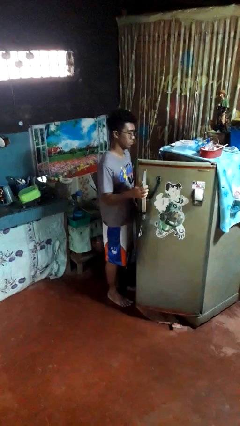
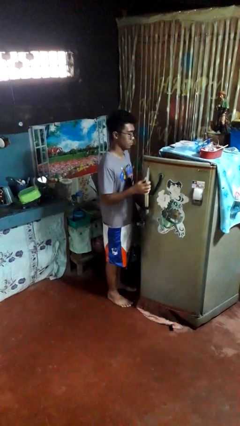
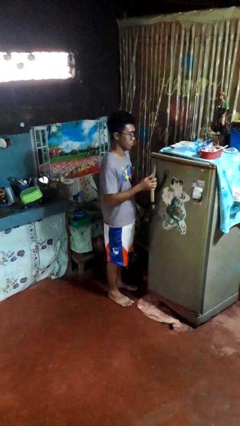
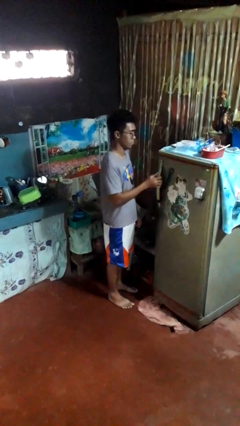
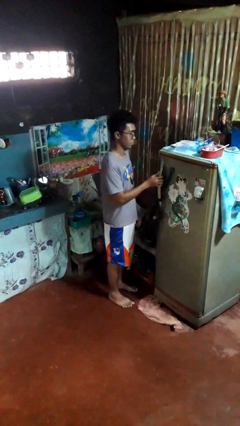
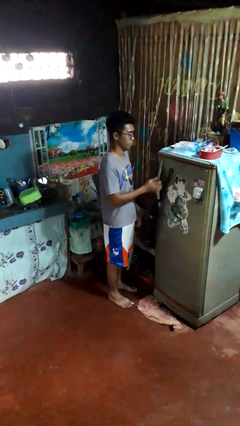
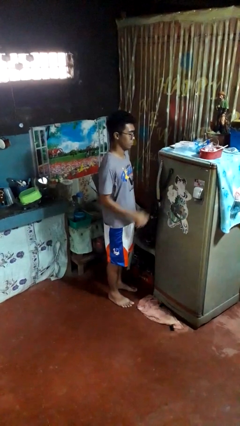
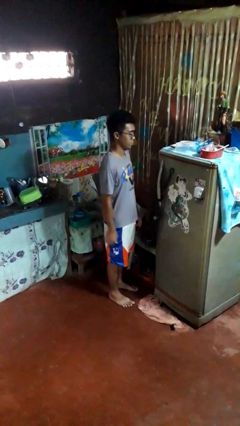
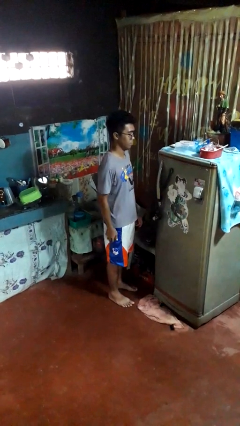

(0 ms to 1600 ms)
person closes refrigerator

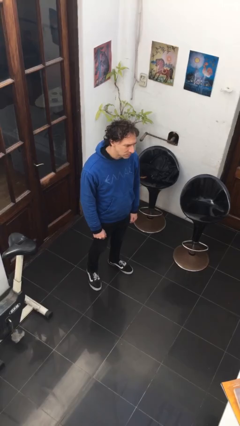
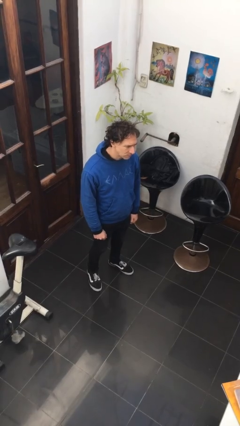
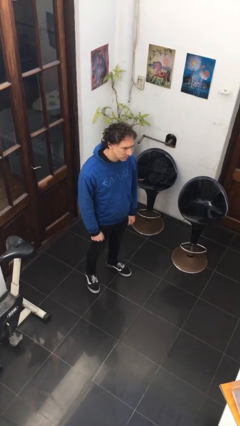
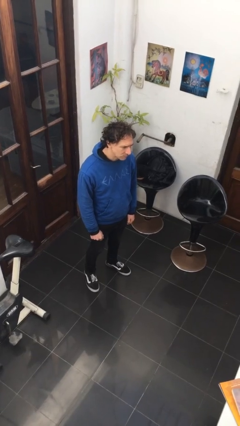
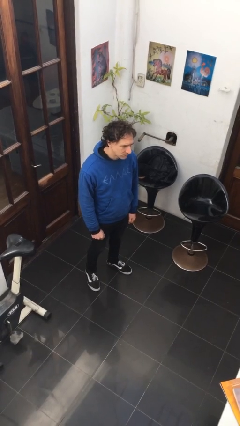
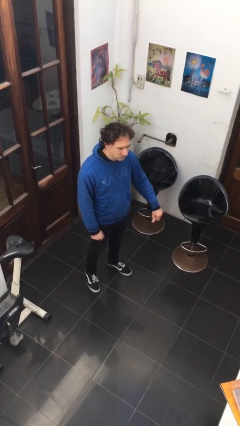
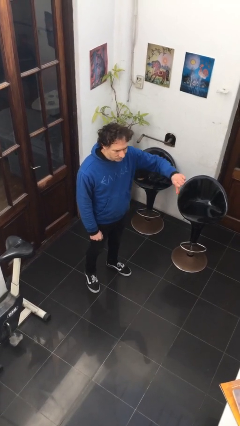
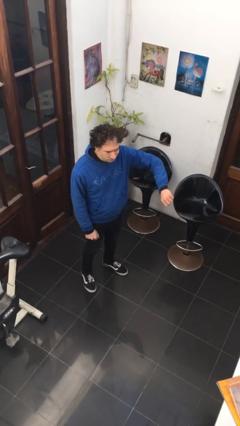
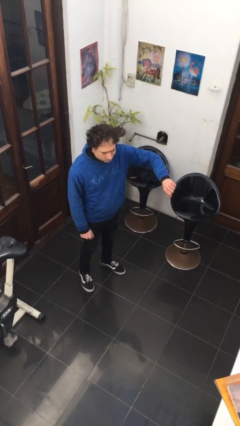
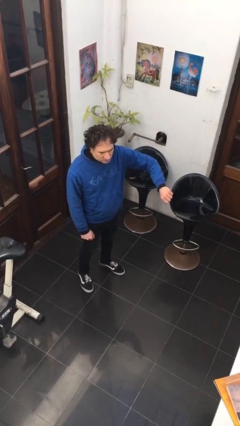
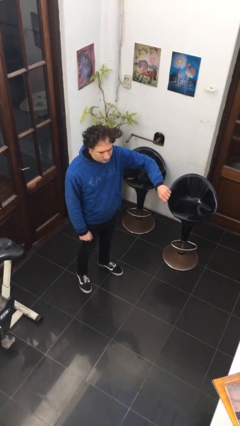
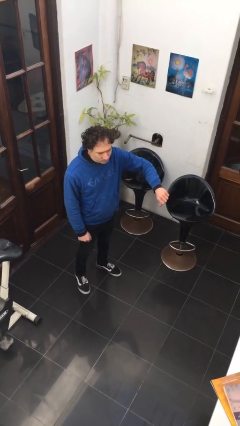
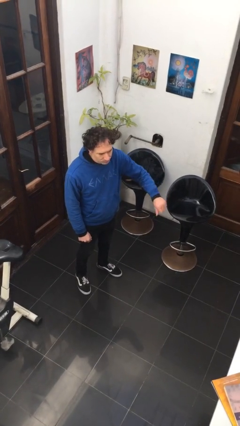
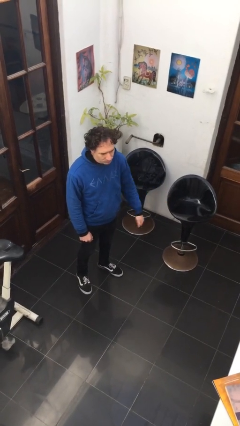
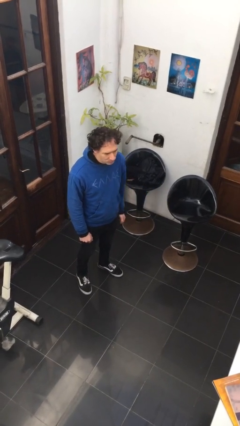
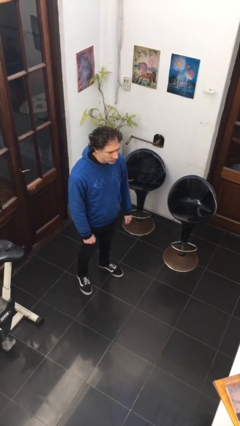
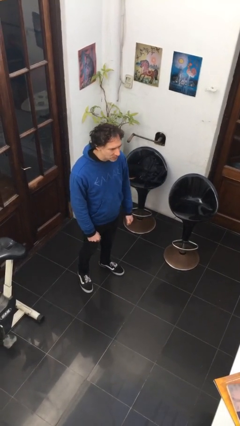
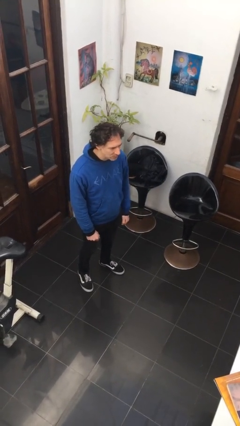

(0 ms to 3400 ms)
person gestures thumbs down

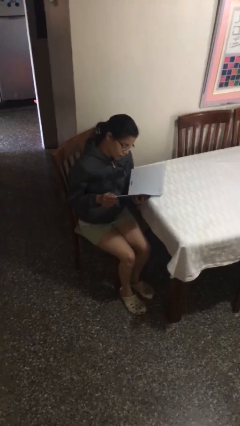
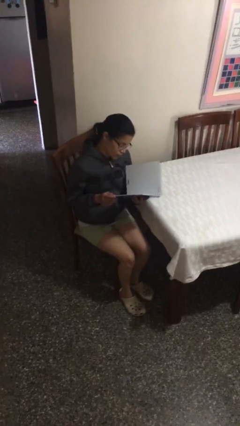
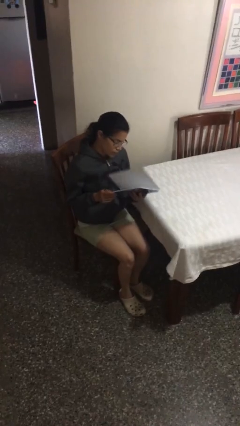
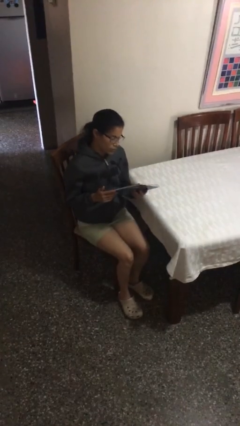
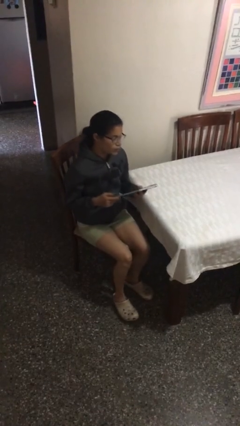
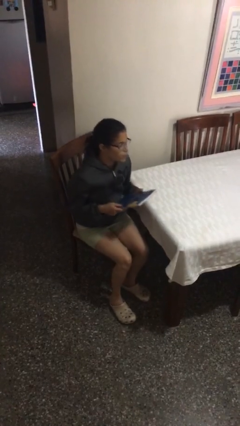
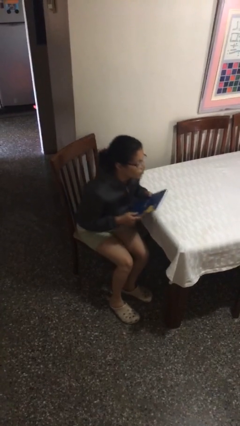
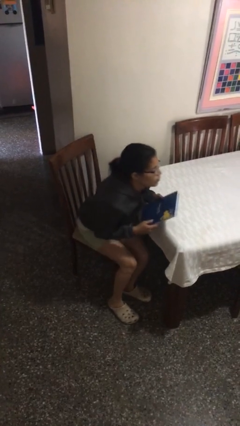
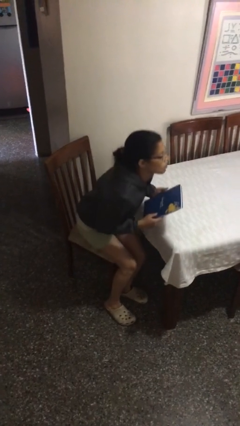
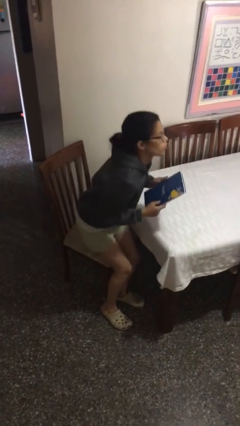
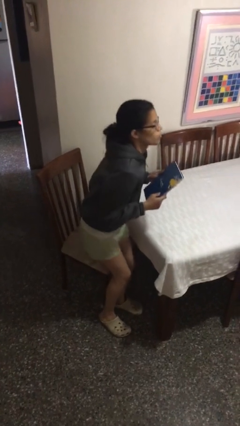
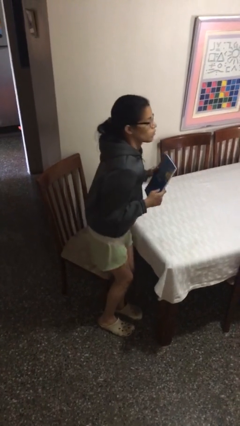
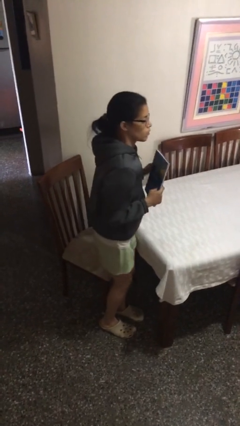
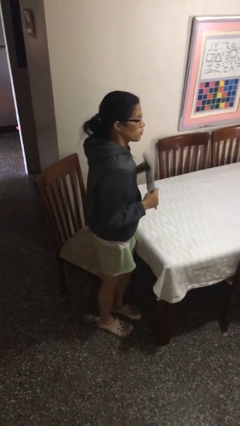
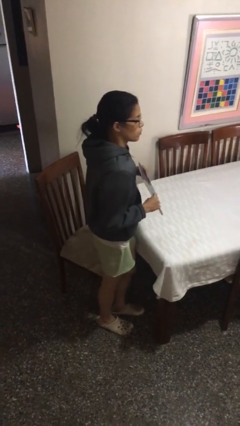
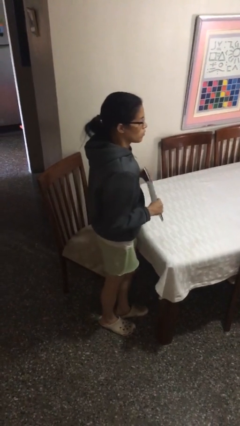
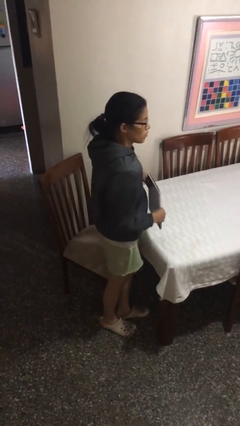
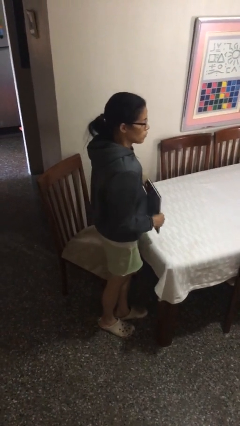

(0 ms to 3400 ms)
person stands up

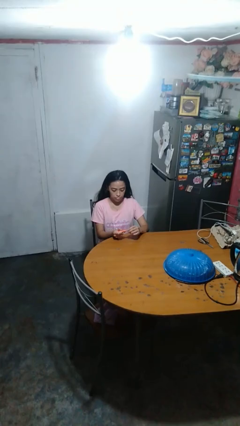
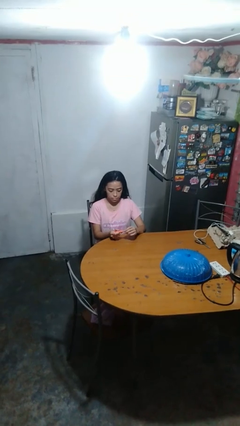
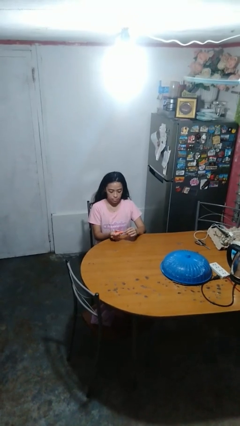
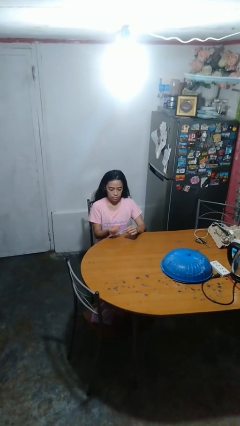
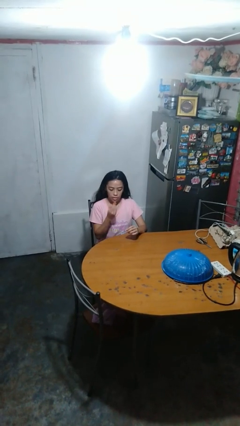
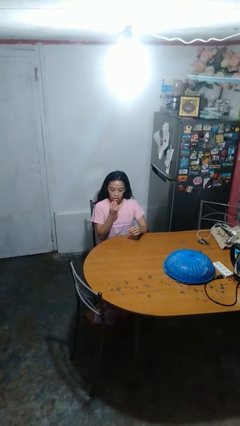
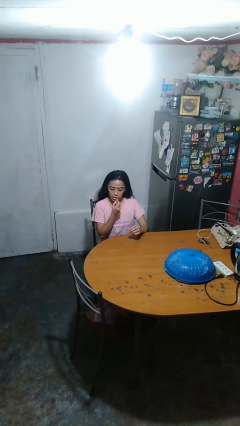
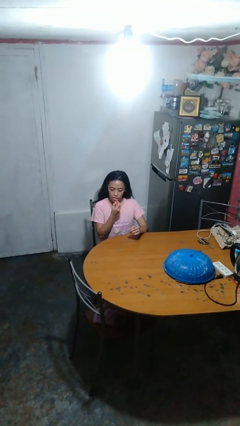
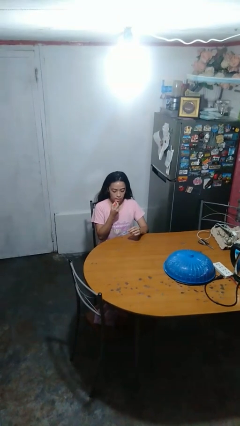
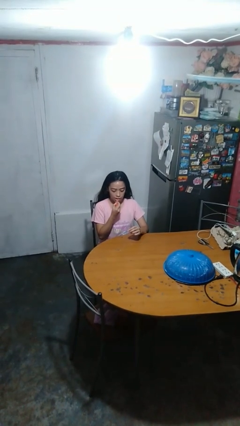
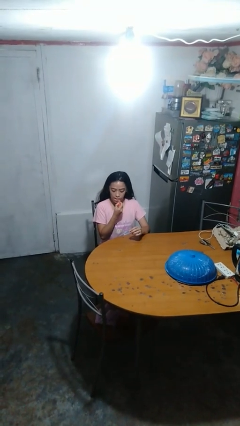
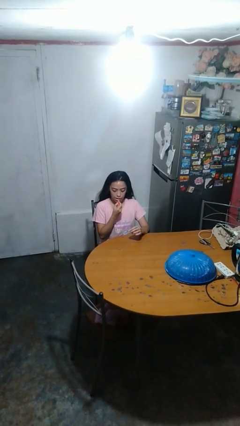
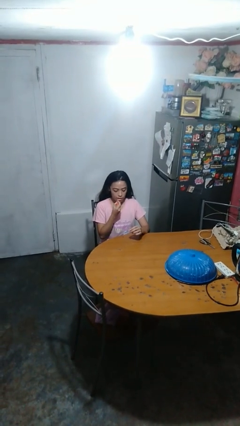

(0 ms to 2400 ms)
person applies lip makeup

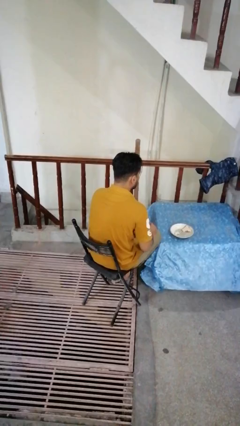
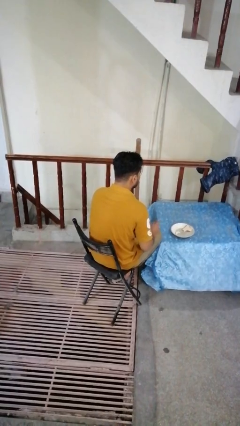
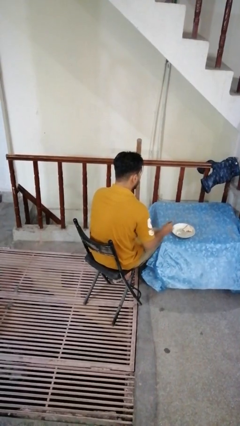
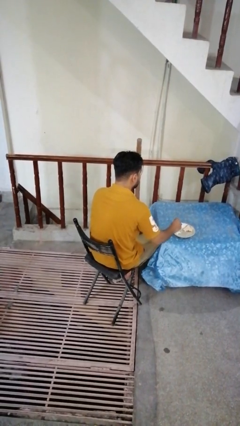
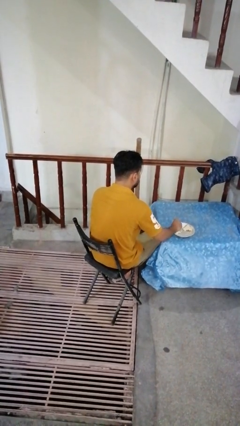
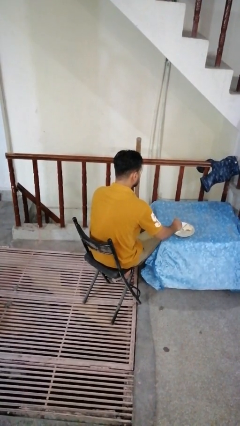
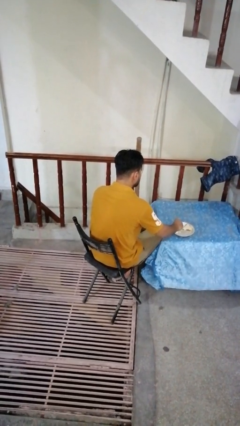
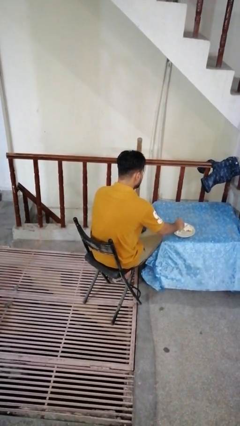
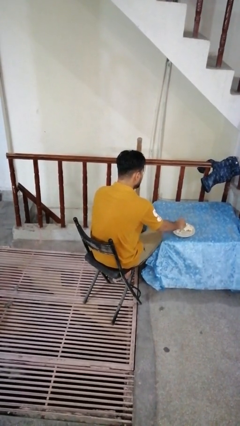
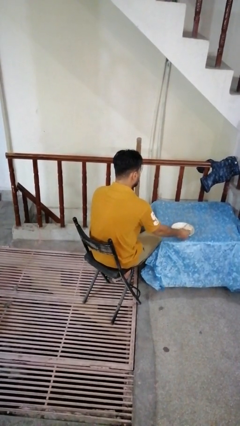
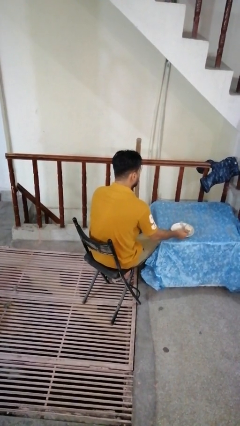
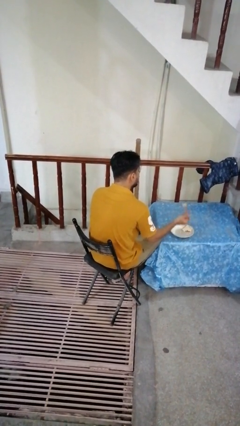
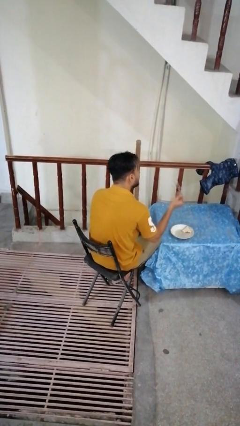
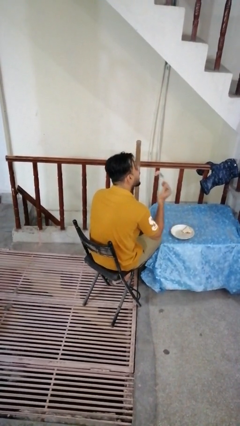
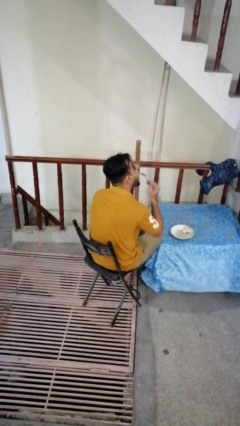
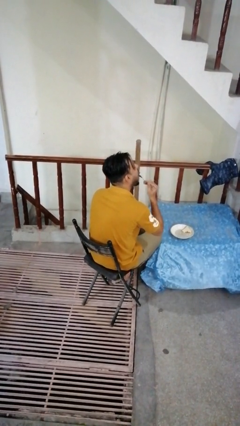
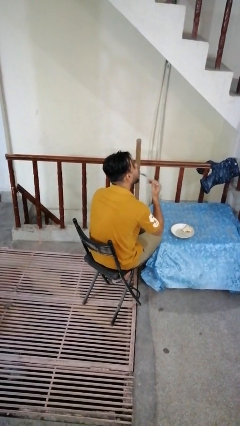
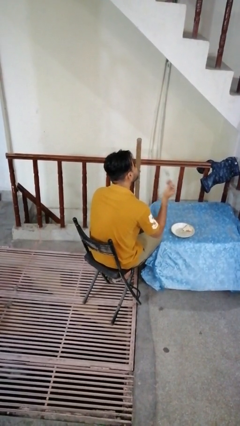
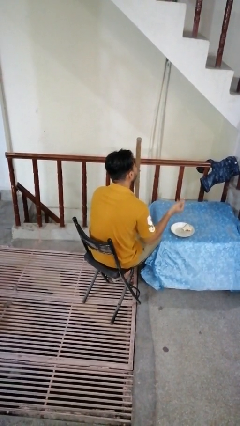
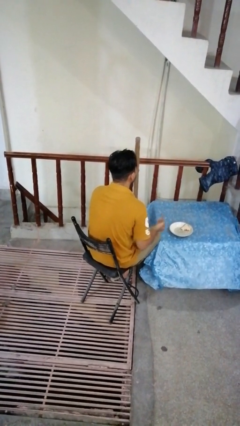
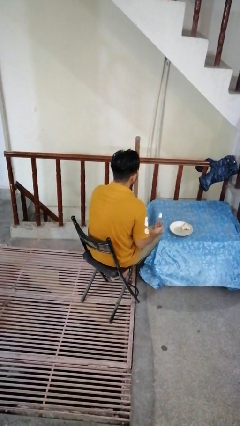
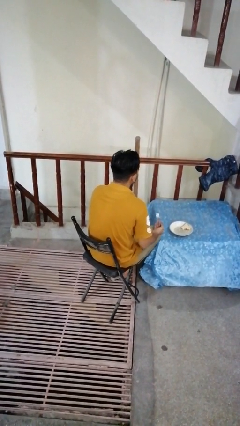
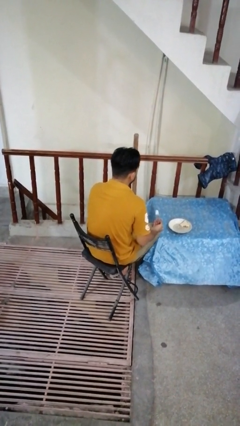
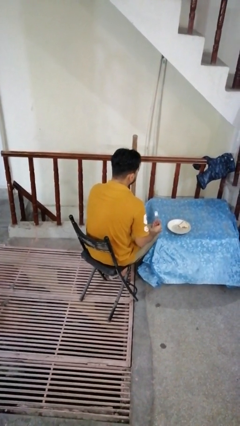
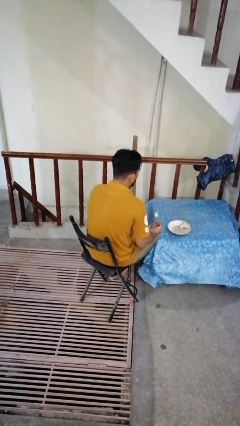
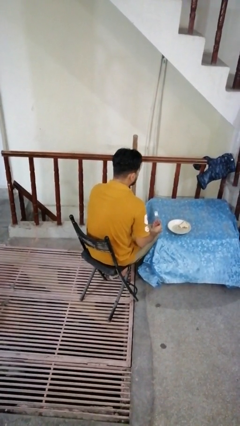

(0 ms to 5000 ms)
person eats with utensil

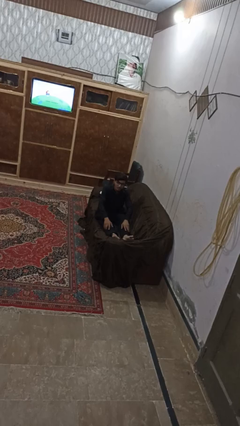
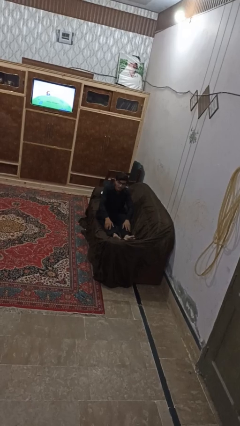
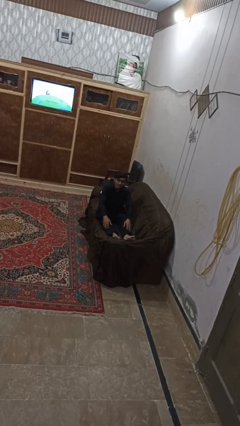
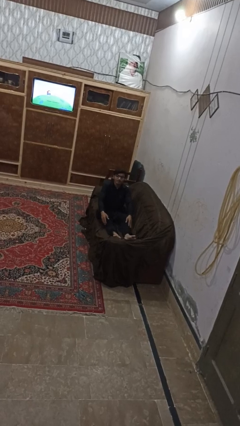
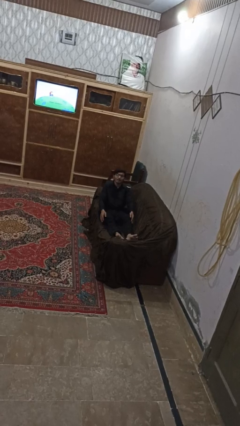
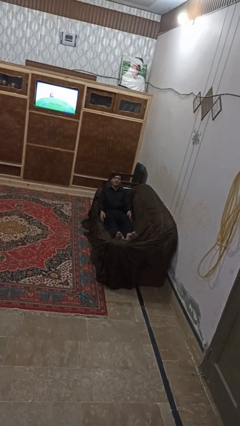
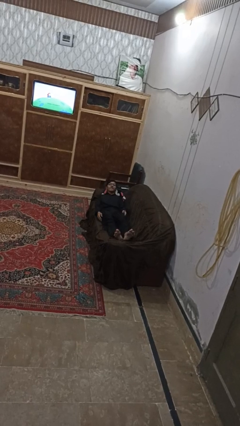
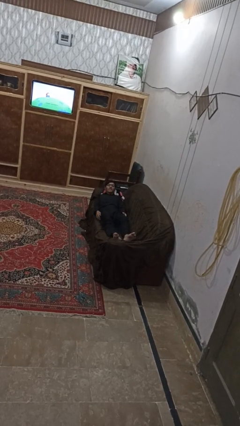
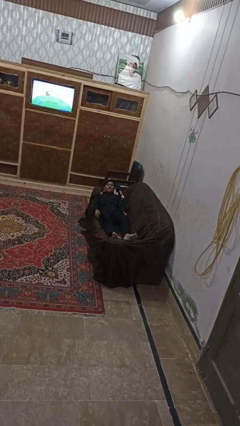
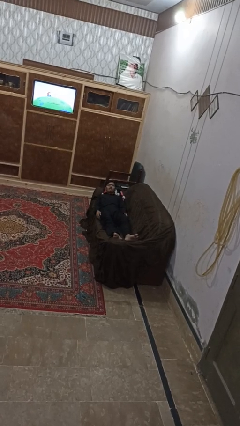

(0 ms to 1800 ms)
person lies down on couch

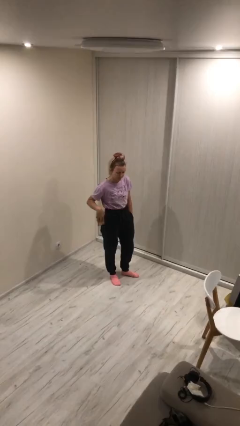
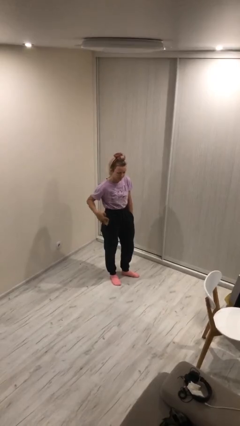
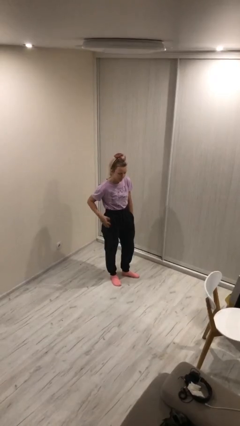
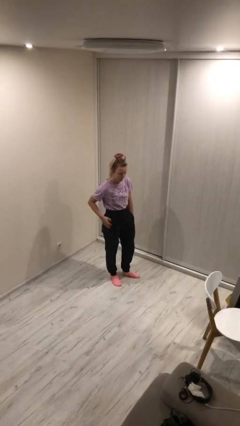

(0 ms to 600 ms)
person puts phone into pocket
